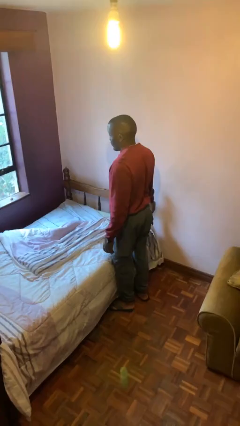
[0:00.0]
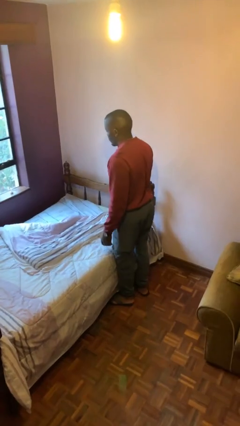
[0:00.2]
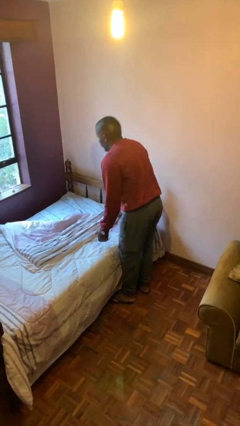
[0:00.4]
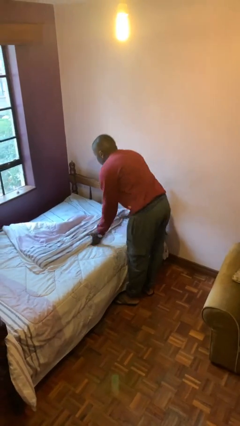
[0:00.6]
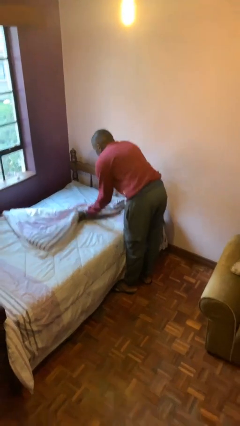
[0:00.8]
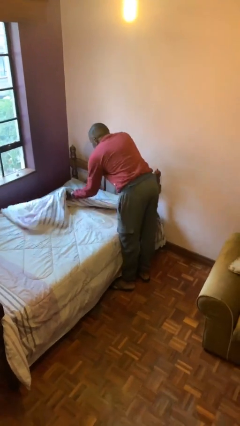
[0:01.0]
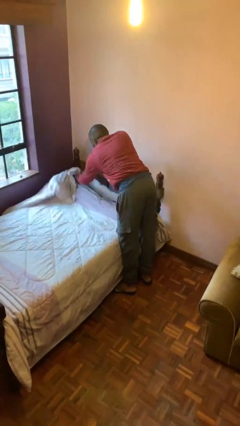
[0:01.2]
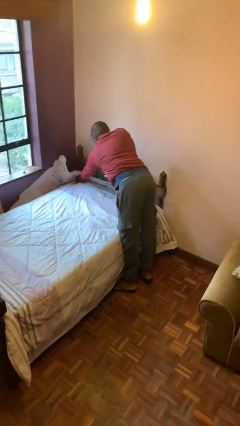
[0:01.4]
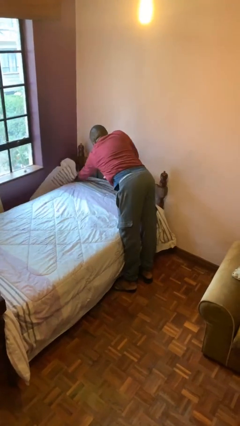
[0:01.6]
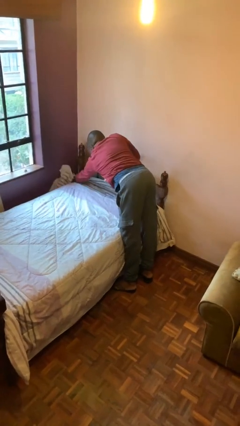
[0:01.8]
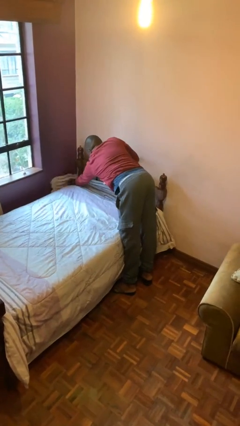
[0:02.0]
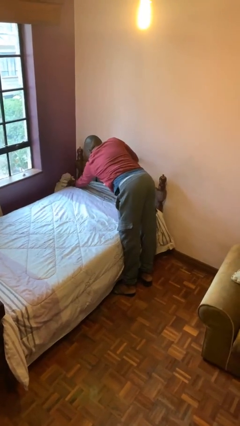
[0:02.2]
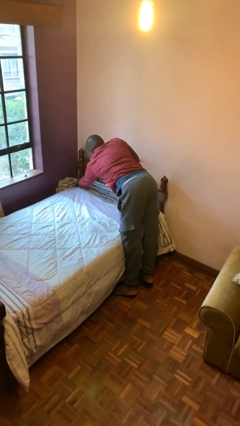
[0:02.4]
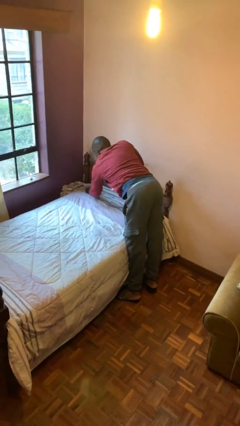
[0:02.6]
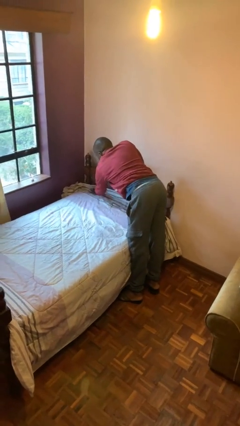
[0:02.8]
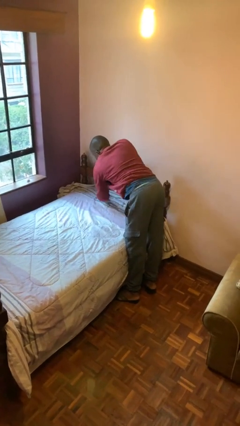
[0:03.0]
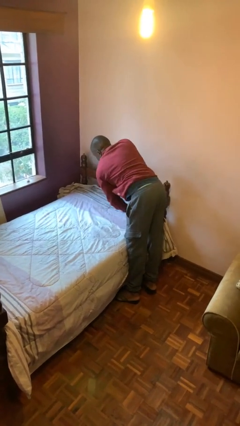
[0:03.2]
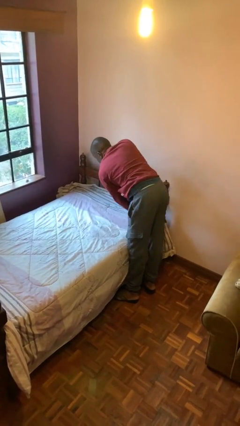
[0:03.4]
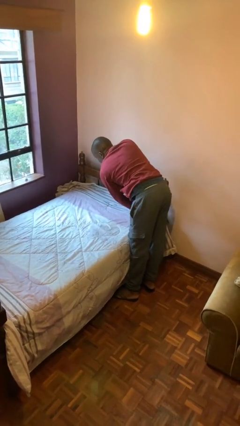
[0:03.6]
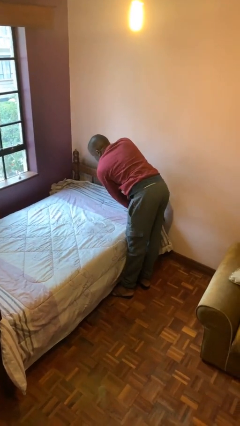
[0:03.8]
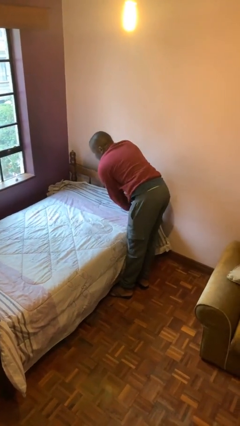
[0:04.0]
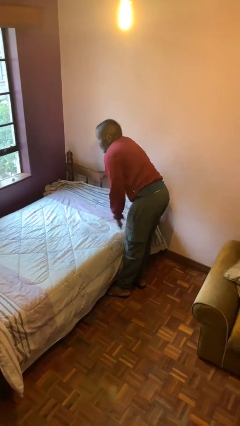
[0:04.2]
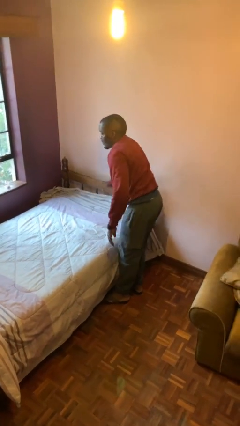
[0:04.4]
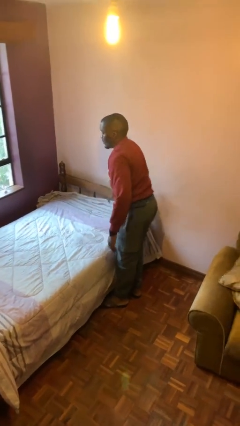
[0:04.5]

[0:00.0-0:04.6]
person makes bed

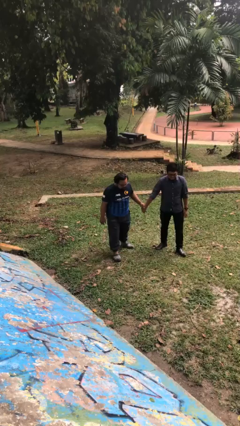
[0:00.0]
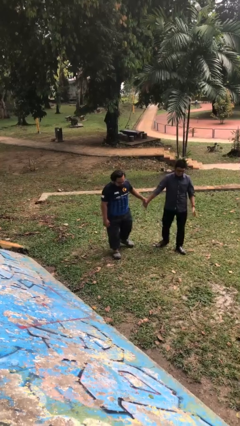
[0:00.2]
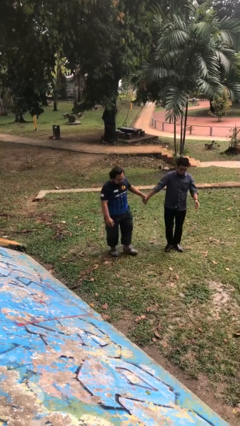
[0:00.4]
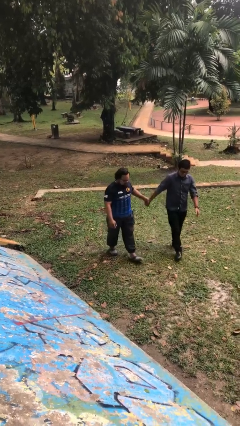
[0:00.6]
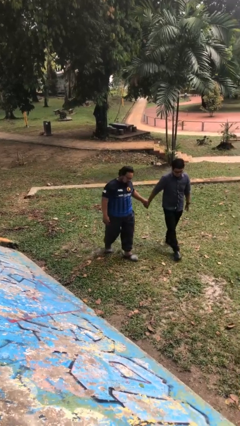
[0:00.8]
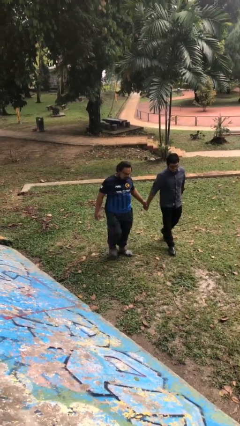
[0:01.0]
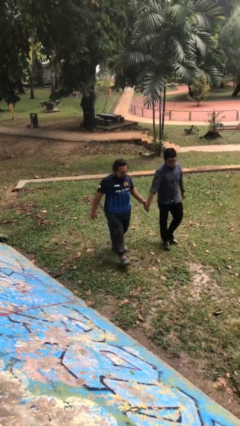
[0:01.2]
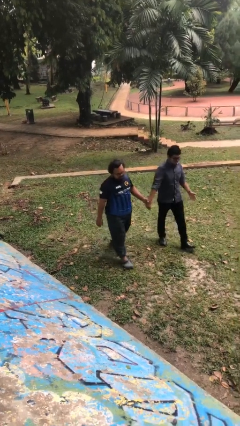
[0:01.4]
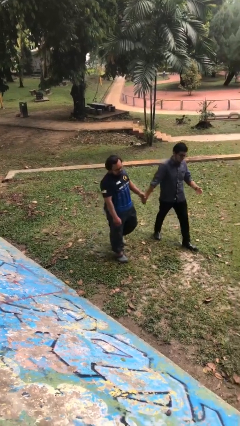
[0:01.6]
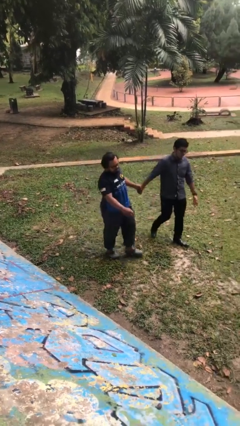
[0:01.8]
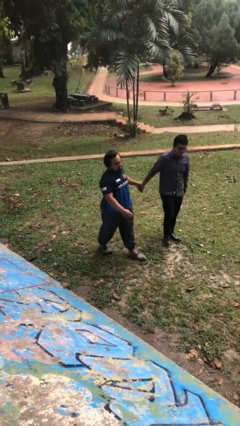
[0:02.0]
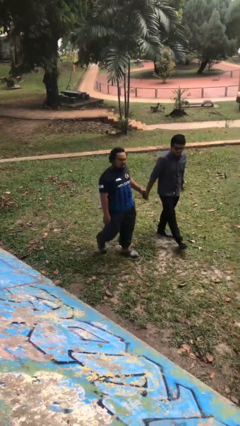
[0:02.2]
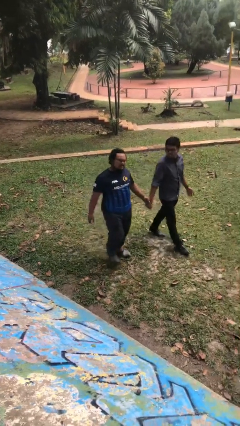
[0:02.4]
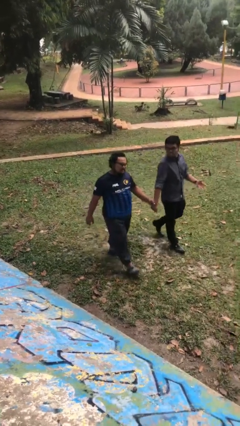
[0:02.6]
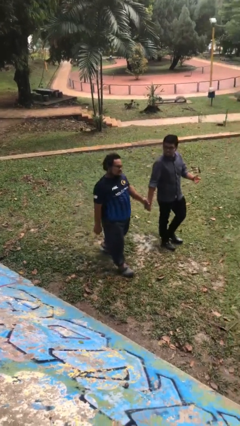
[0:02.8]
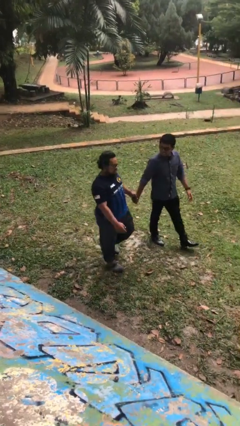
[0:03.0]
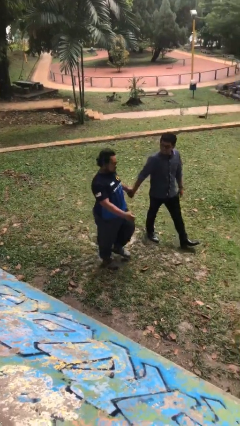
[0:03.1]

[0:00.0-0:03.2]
person holds hand

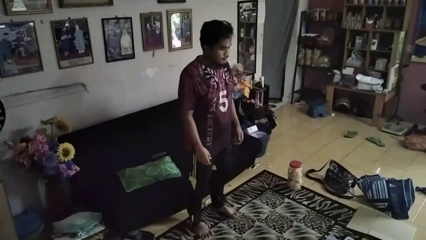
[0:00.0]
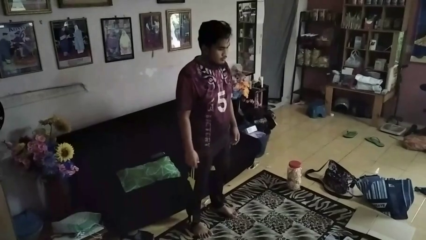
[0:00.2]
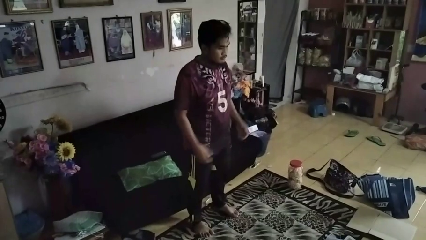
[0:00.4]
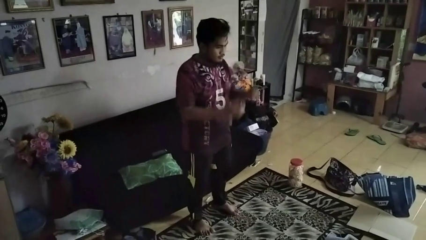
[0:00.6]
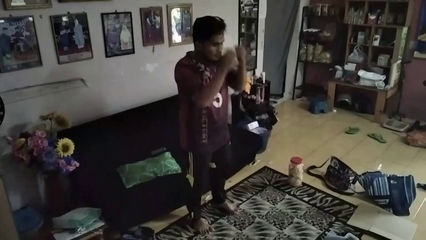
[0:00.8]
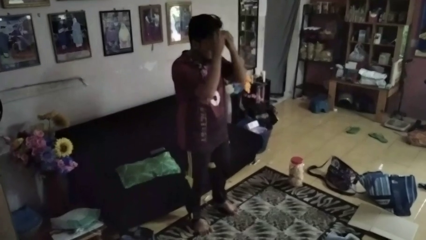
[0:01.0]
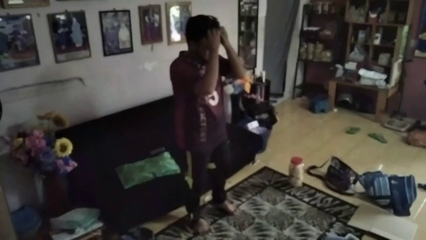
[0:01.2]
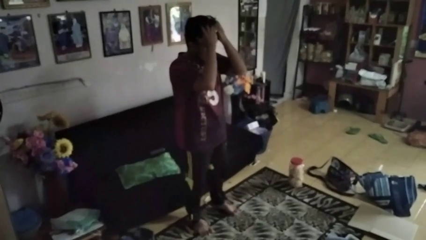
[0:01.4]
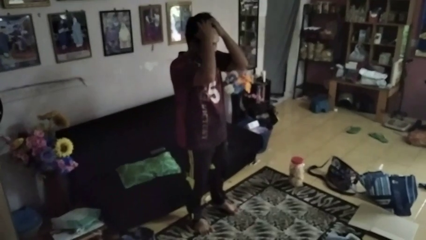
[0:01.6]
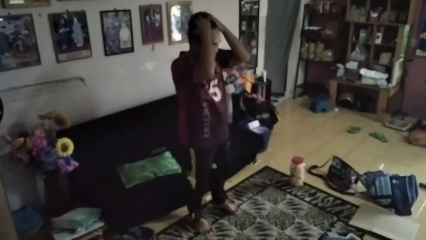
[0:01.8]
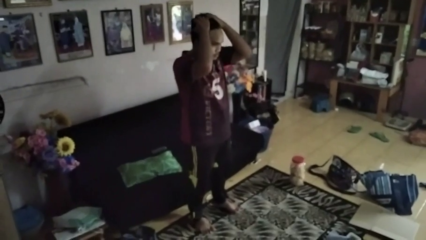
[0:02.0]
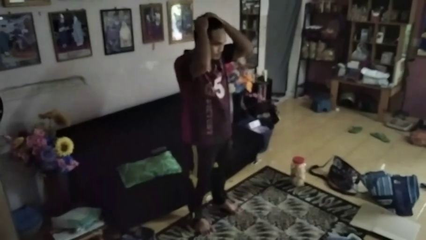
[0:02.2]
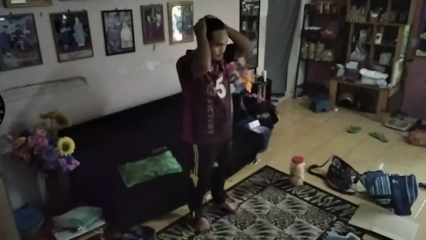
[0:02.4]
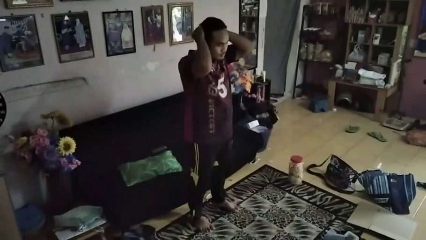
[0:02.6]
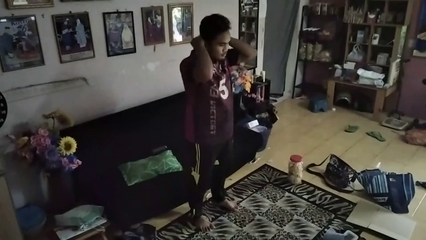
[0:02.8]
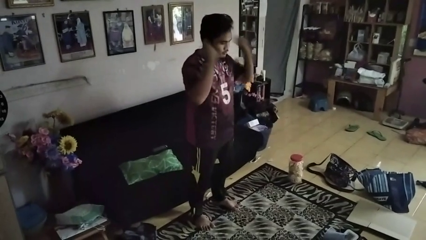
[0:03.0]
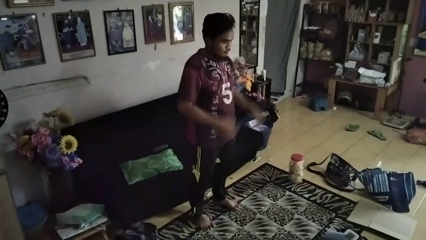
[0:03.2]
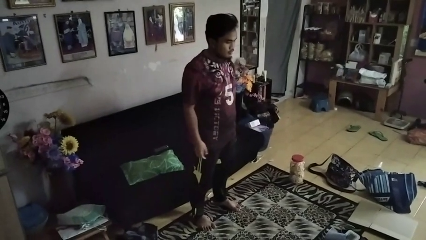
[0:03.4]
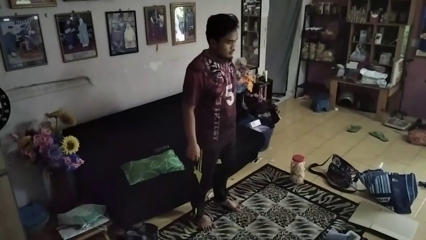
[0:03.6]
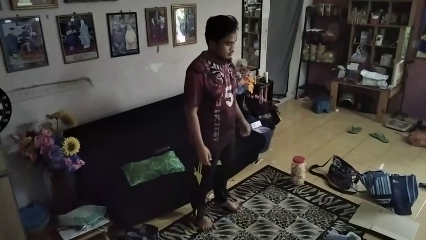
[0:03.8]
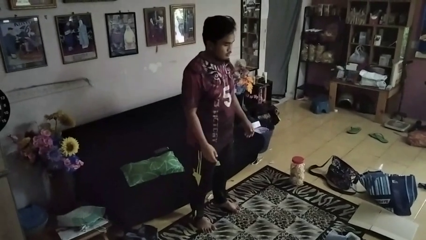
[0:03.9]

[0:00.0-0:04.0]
person strokes hair

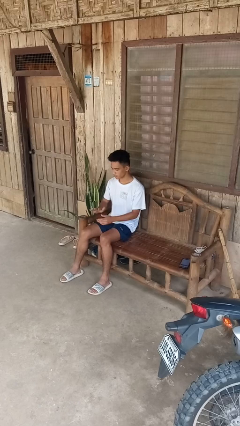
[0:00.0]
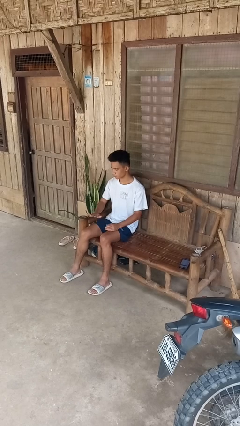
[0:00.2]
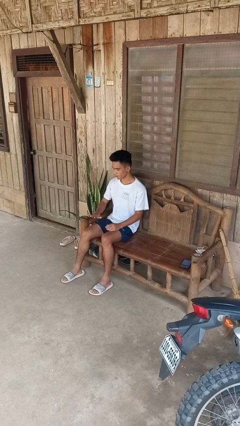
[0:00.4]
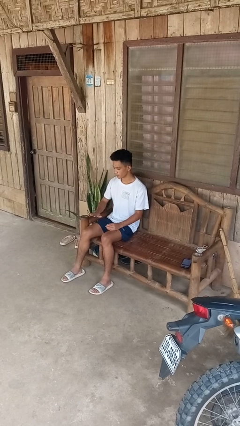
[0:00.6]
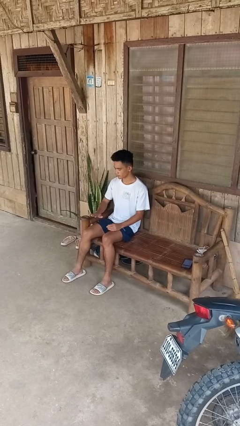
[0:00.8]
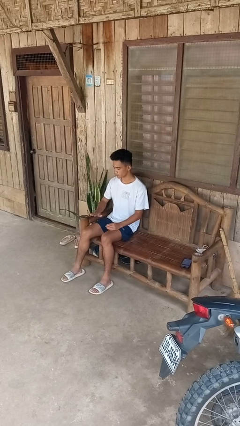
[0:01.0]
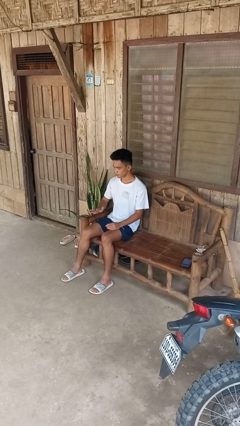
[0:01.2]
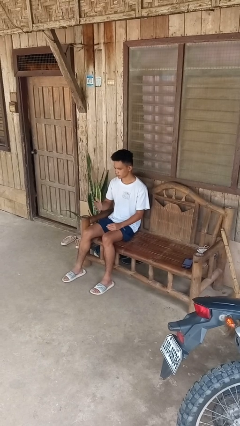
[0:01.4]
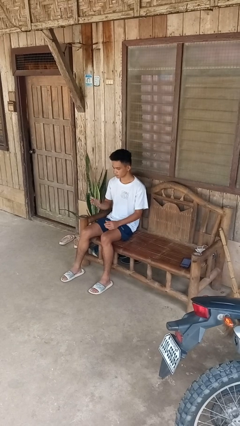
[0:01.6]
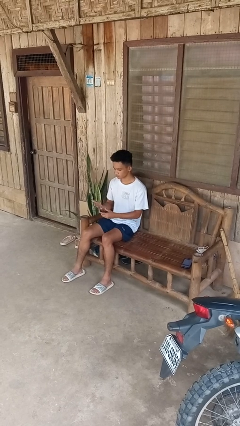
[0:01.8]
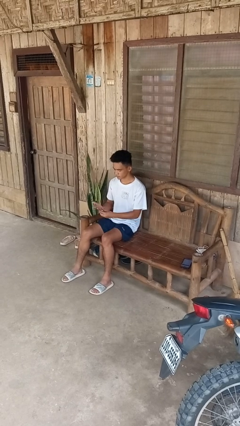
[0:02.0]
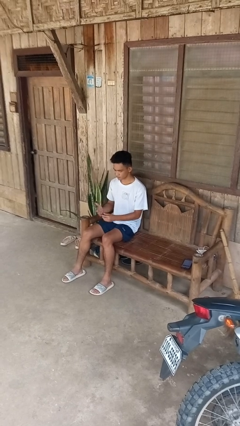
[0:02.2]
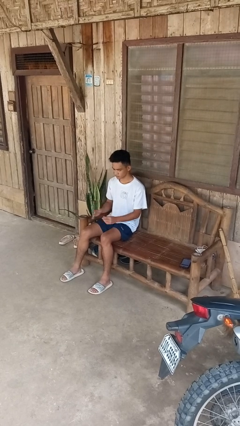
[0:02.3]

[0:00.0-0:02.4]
person puts on ring

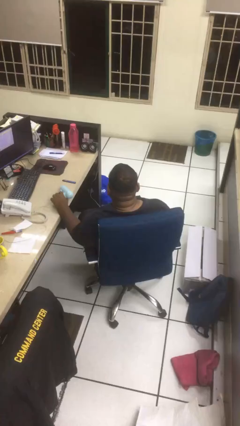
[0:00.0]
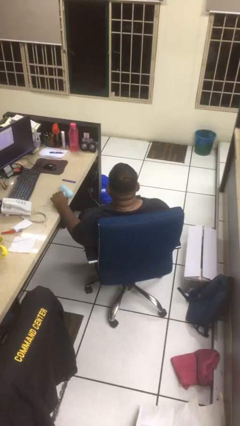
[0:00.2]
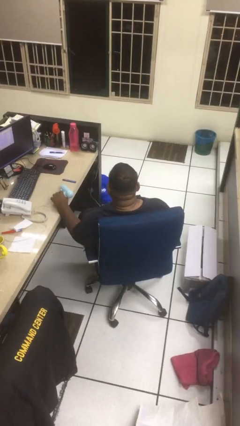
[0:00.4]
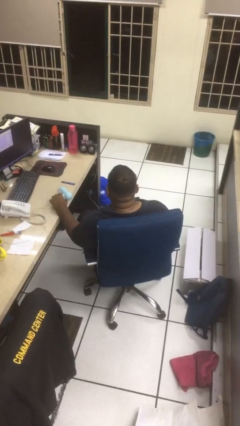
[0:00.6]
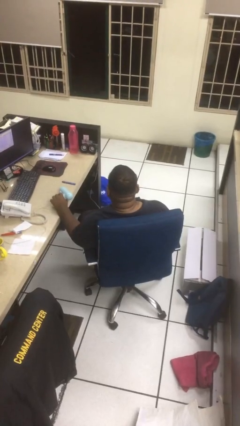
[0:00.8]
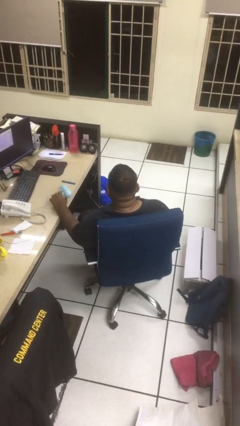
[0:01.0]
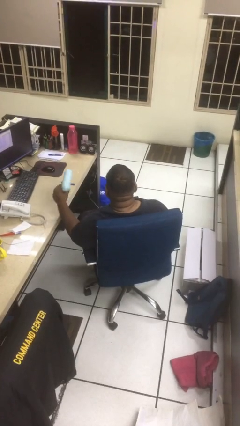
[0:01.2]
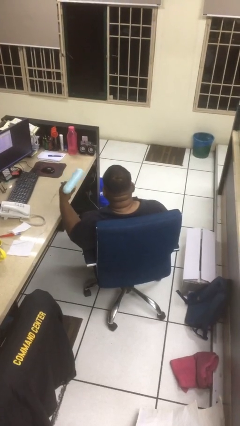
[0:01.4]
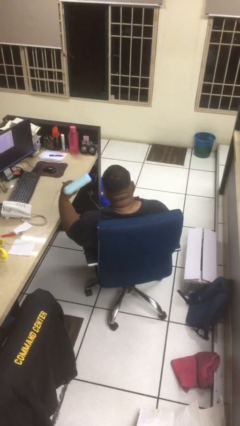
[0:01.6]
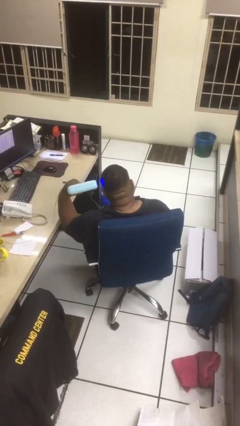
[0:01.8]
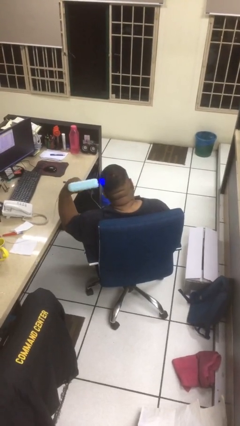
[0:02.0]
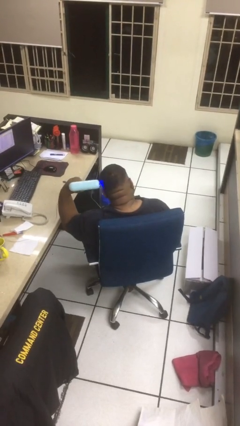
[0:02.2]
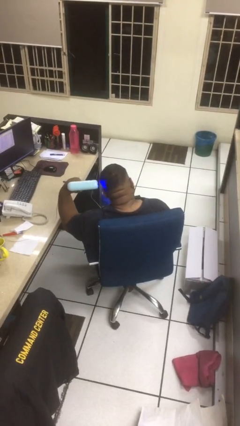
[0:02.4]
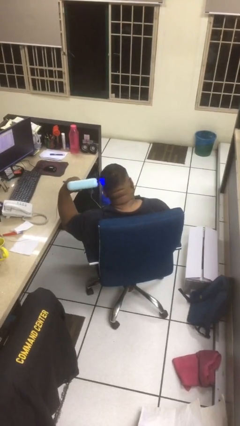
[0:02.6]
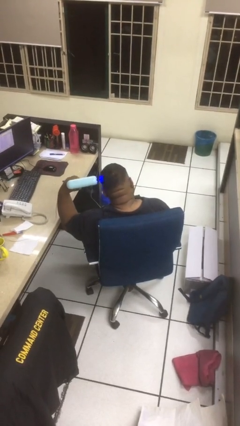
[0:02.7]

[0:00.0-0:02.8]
person dries hair with hairdryer

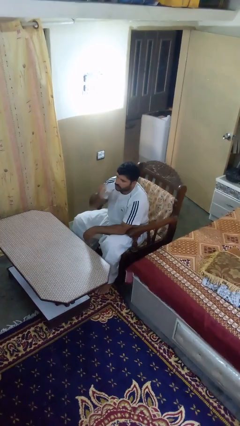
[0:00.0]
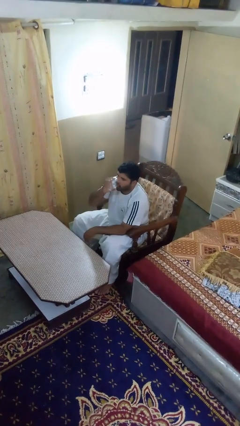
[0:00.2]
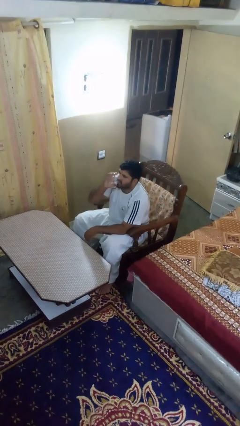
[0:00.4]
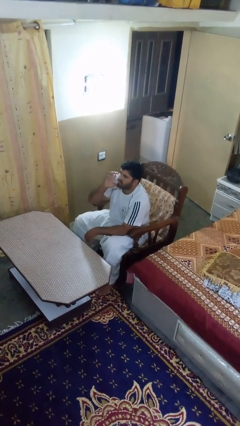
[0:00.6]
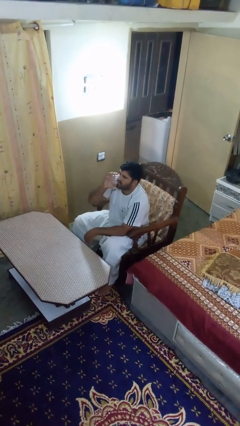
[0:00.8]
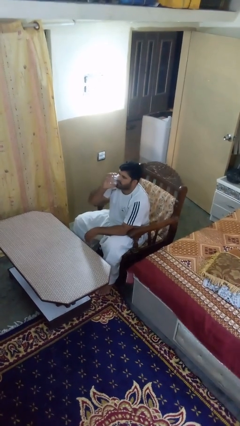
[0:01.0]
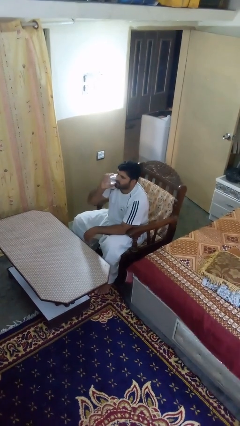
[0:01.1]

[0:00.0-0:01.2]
person drinks from shotglass
